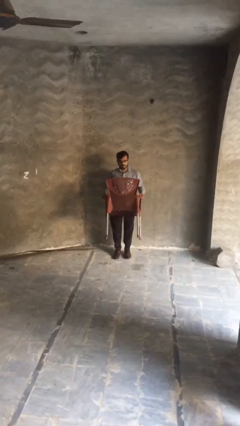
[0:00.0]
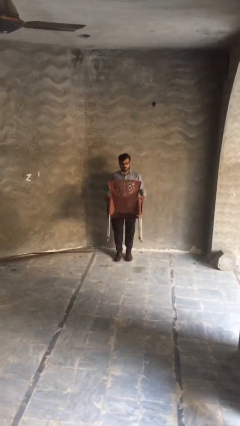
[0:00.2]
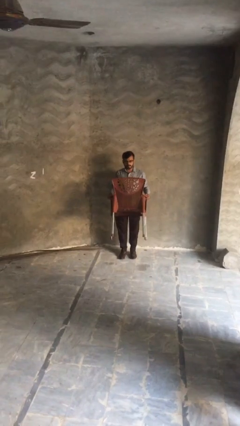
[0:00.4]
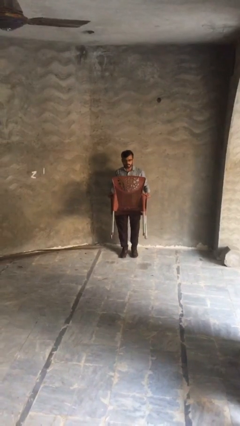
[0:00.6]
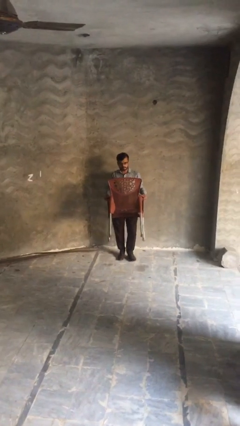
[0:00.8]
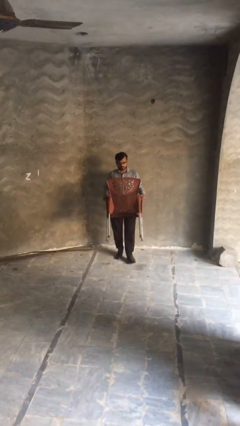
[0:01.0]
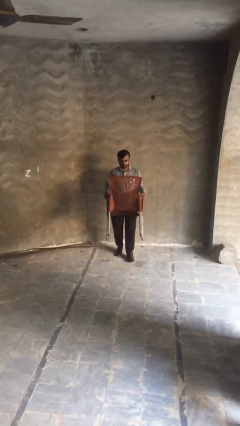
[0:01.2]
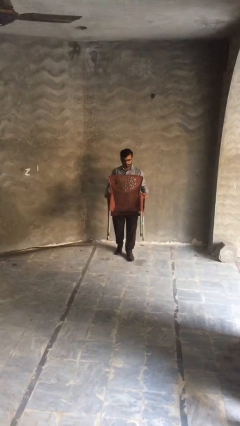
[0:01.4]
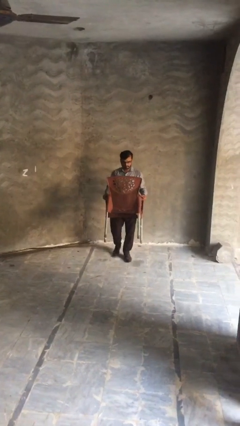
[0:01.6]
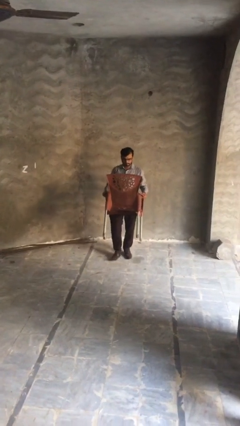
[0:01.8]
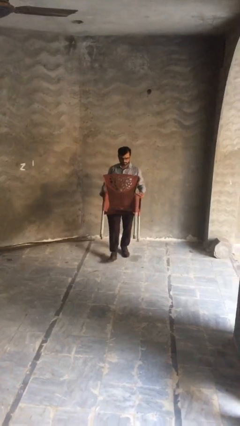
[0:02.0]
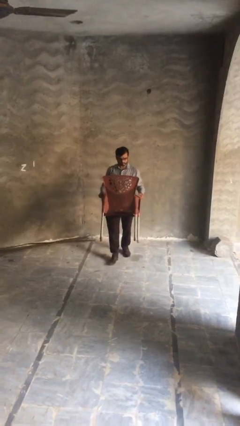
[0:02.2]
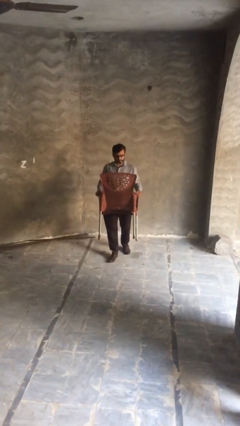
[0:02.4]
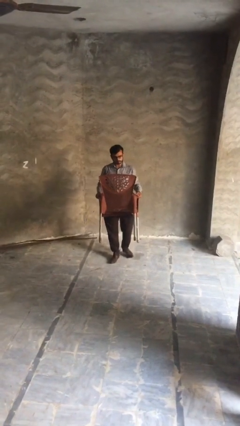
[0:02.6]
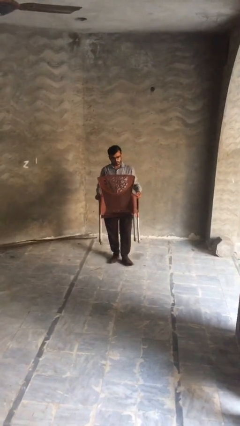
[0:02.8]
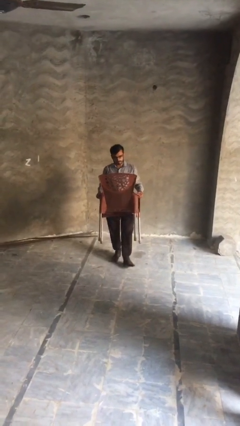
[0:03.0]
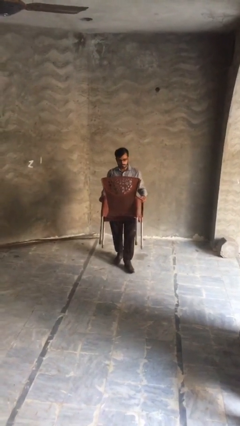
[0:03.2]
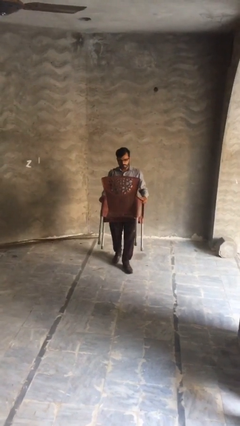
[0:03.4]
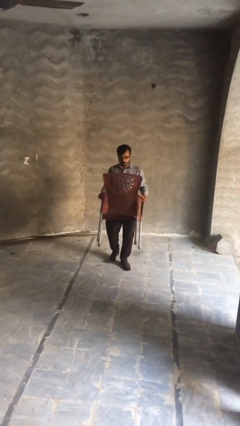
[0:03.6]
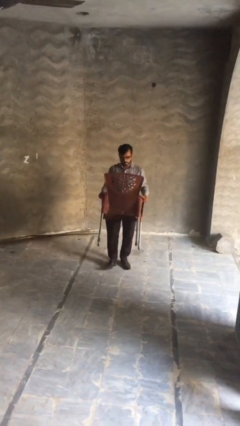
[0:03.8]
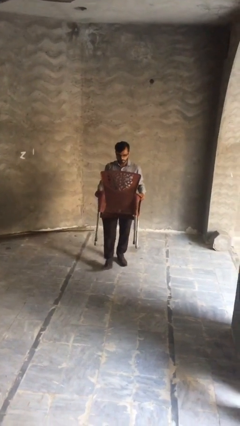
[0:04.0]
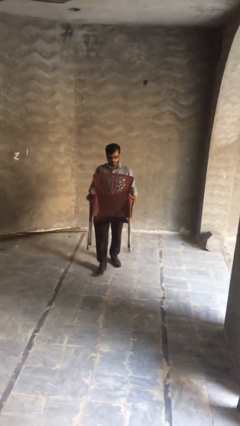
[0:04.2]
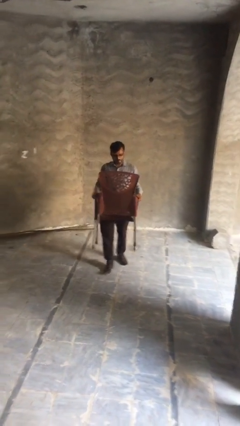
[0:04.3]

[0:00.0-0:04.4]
person carries heavy object

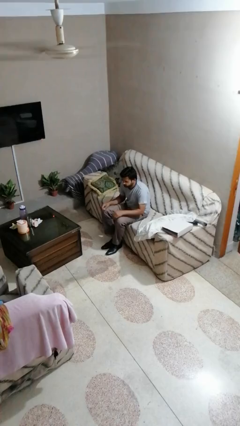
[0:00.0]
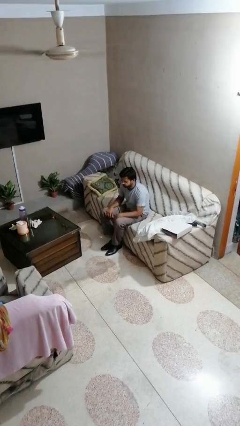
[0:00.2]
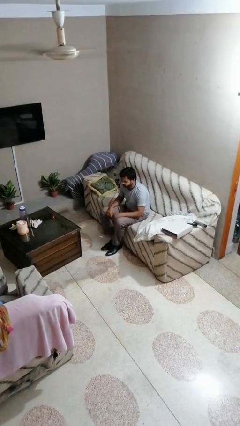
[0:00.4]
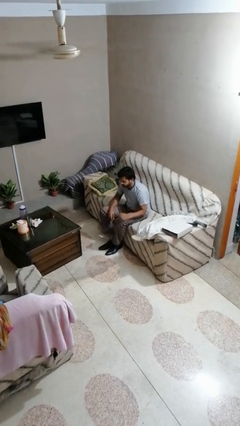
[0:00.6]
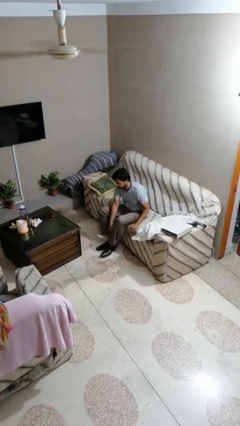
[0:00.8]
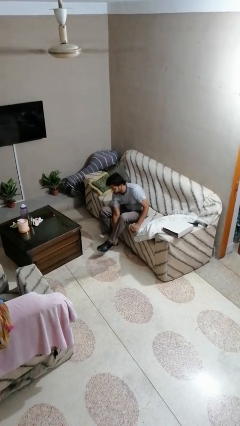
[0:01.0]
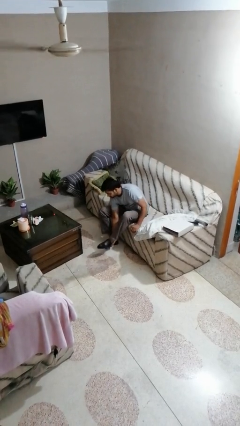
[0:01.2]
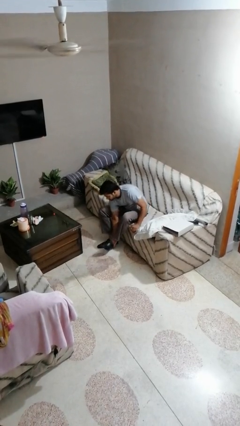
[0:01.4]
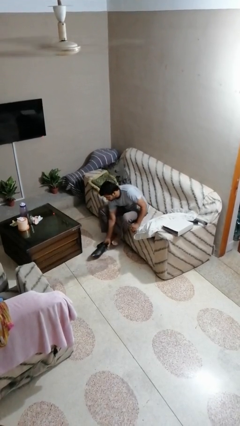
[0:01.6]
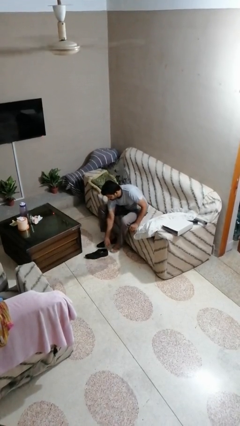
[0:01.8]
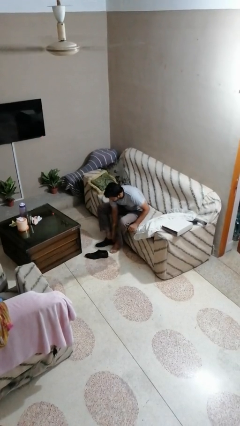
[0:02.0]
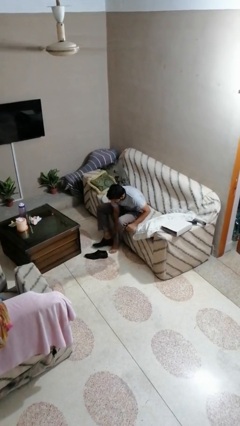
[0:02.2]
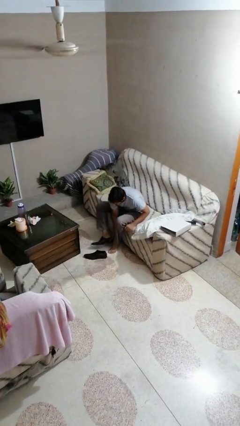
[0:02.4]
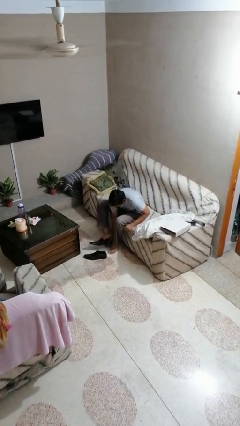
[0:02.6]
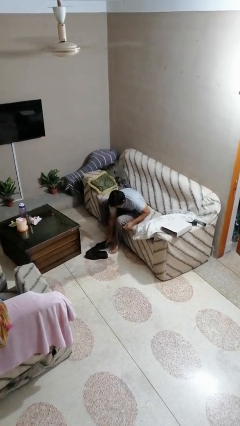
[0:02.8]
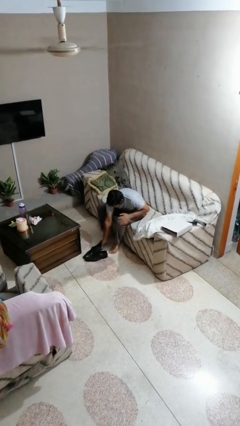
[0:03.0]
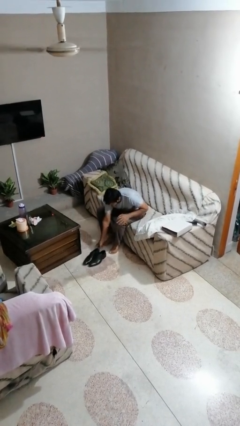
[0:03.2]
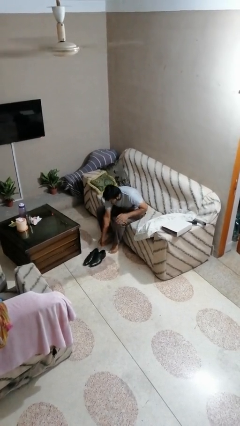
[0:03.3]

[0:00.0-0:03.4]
person takes off shoes

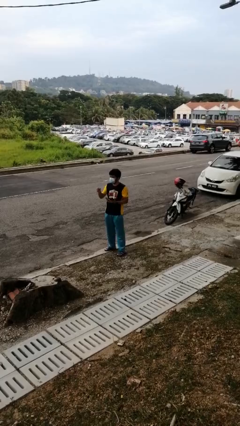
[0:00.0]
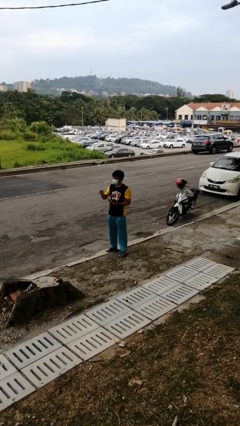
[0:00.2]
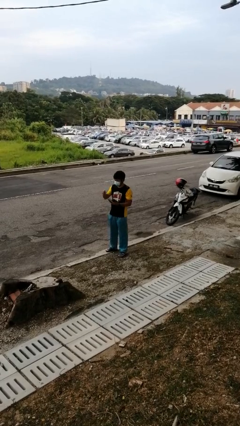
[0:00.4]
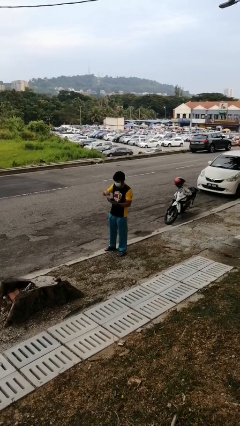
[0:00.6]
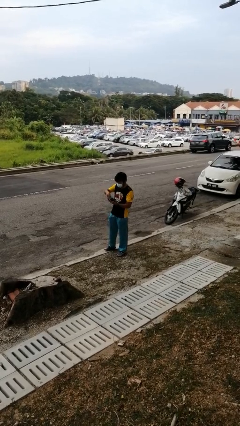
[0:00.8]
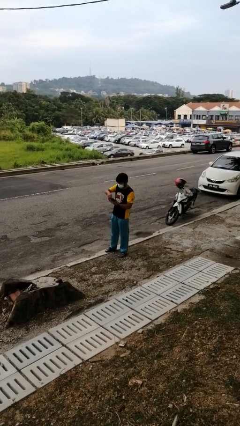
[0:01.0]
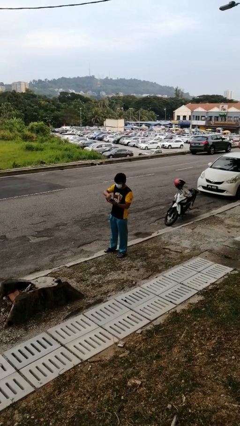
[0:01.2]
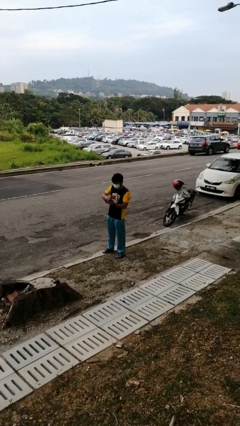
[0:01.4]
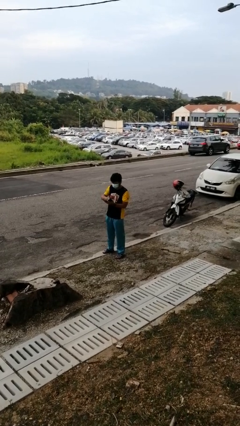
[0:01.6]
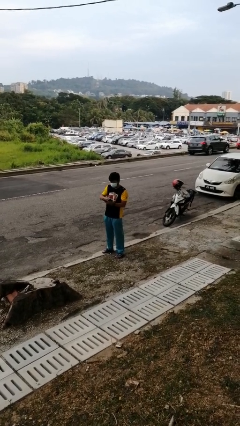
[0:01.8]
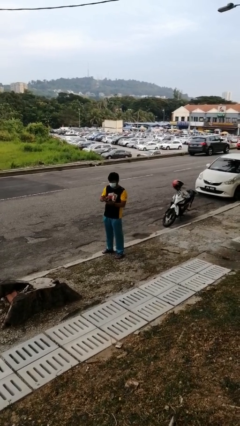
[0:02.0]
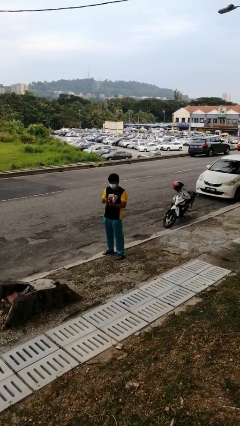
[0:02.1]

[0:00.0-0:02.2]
person puts object into purse

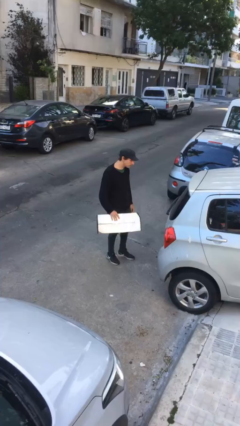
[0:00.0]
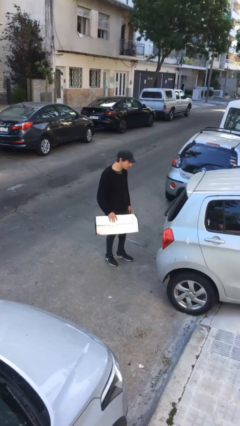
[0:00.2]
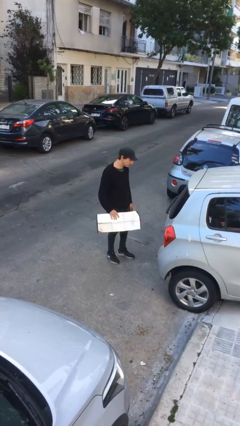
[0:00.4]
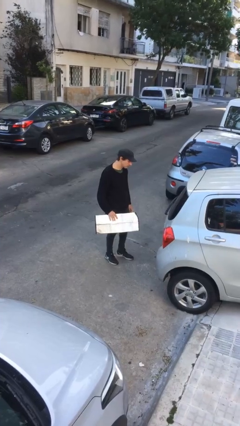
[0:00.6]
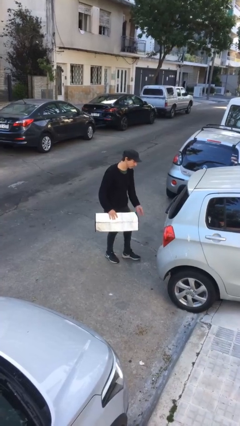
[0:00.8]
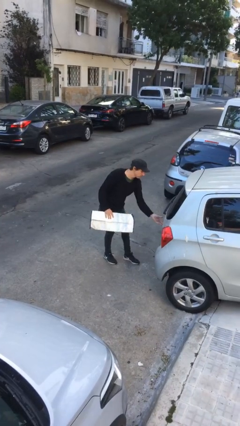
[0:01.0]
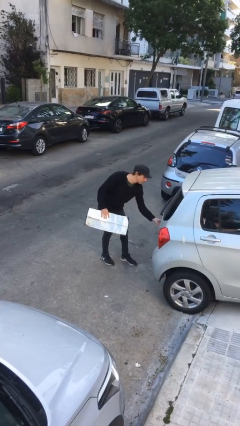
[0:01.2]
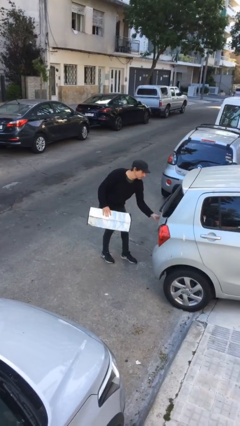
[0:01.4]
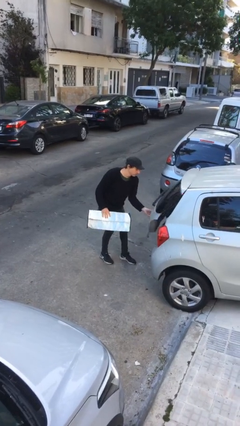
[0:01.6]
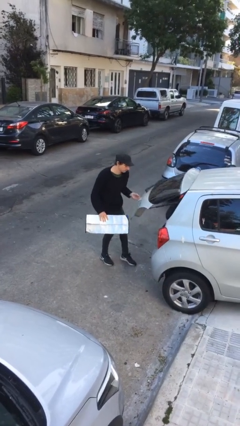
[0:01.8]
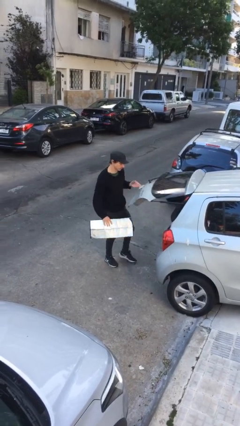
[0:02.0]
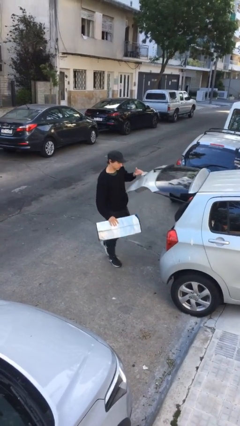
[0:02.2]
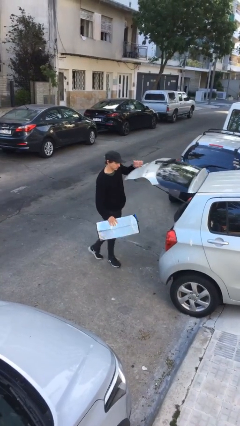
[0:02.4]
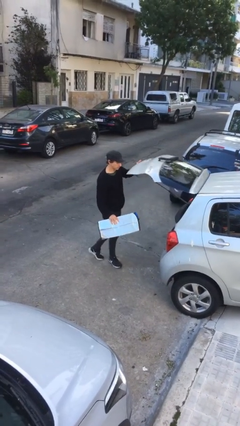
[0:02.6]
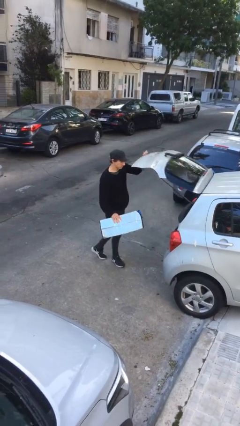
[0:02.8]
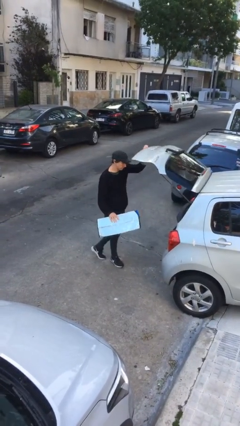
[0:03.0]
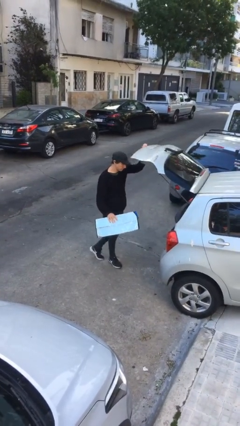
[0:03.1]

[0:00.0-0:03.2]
person opens car trunk

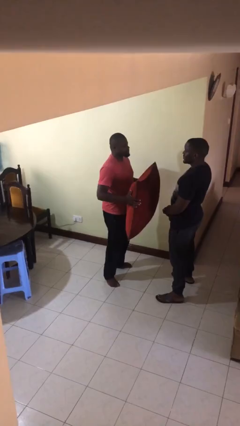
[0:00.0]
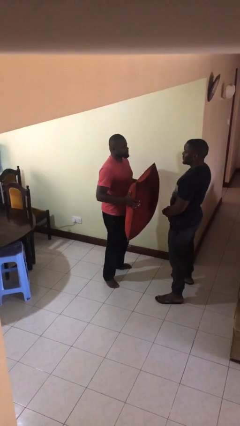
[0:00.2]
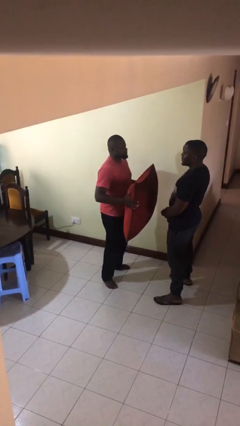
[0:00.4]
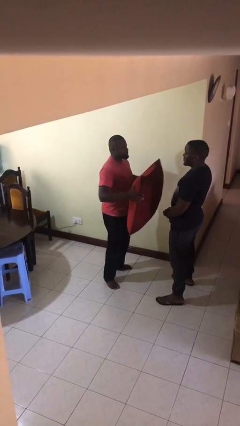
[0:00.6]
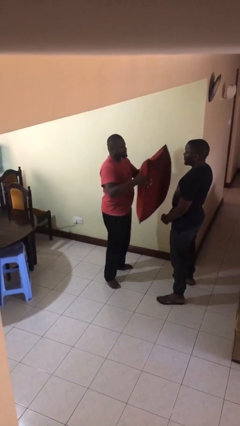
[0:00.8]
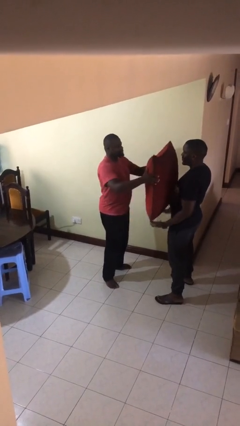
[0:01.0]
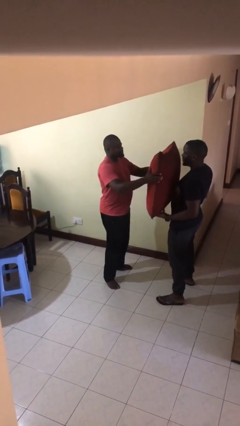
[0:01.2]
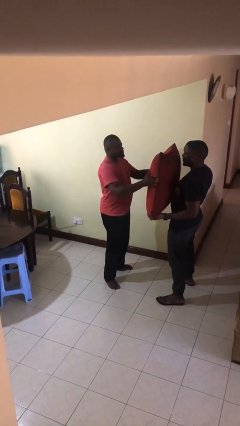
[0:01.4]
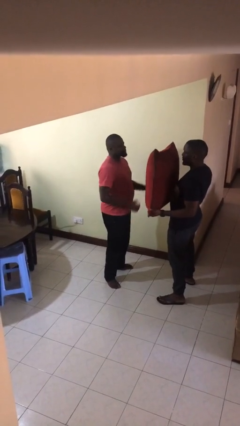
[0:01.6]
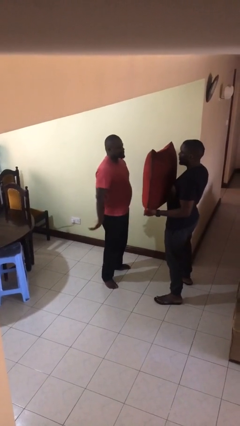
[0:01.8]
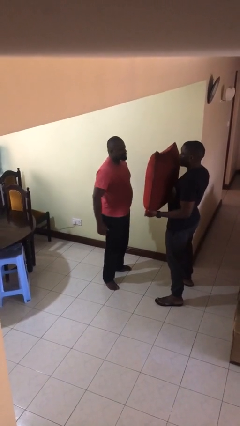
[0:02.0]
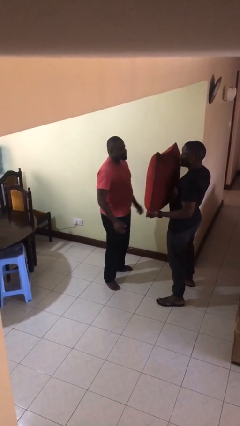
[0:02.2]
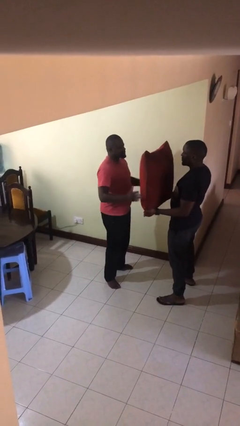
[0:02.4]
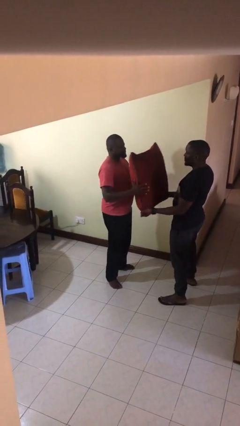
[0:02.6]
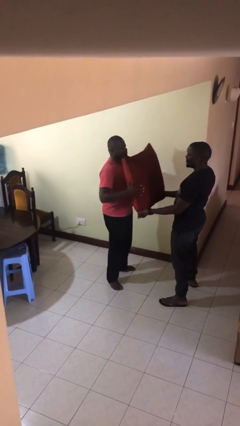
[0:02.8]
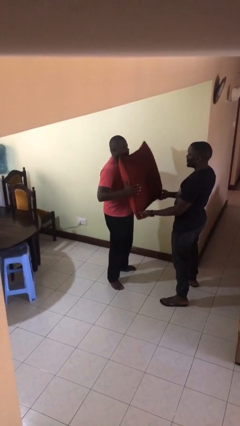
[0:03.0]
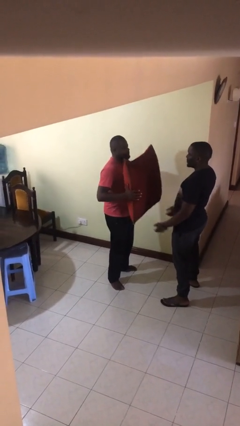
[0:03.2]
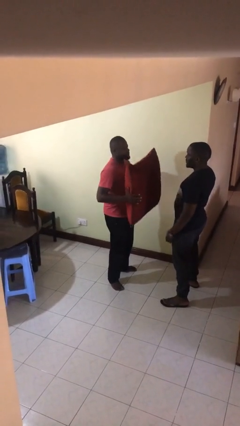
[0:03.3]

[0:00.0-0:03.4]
person transfers object to person

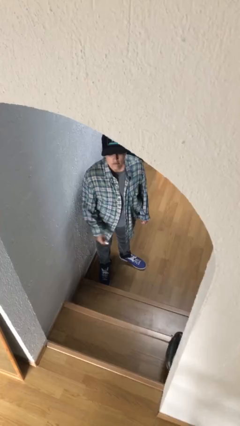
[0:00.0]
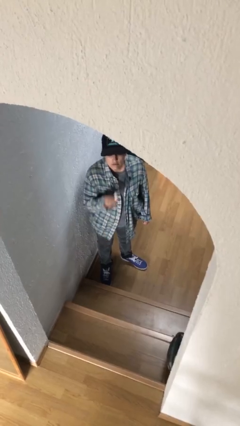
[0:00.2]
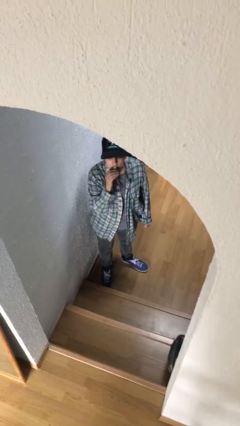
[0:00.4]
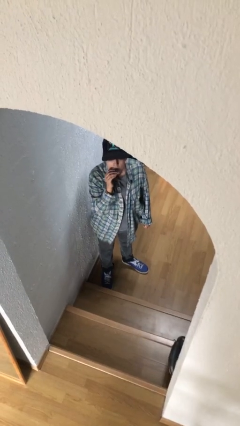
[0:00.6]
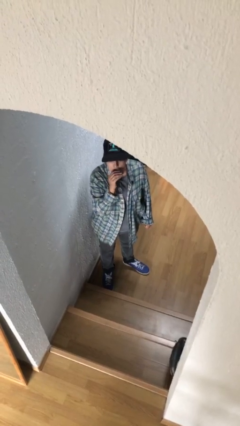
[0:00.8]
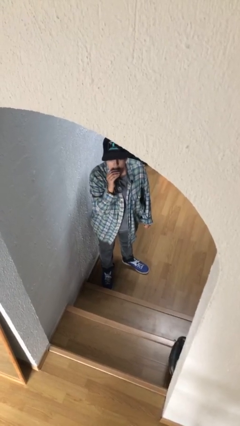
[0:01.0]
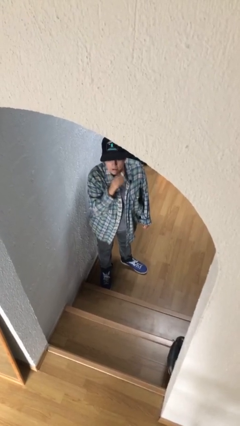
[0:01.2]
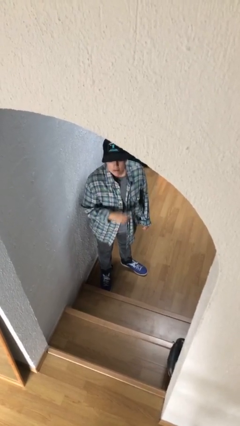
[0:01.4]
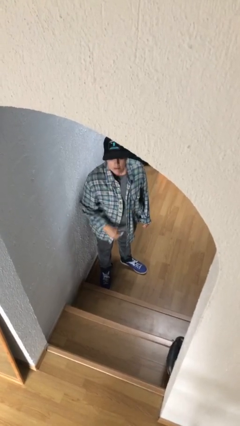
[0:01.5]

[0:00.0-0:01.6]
person applies lip makeup
